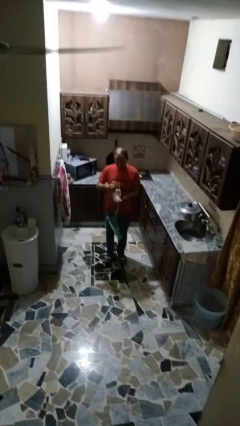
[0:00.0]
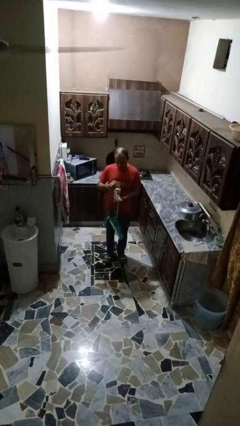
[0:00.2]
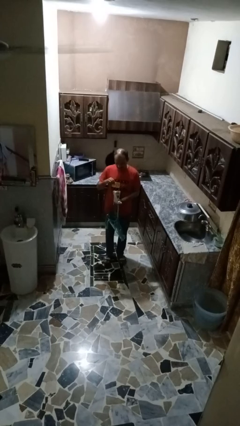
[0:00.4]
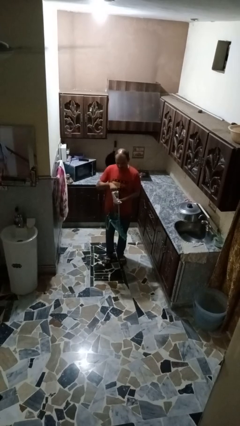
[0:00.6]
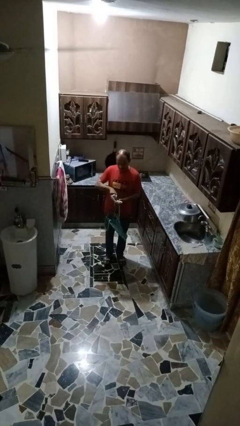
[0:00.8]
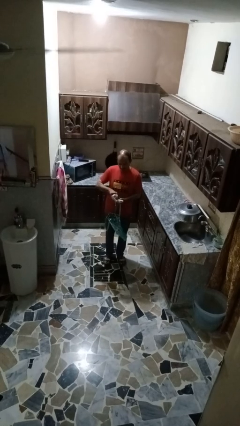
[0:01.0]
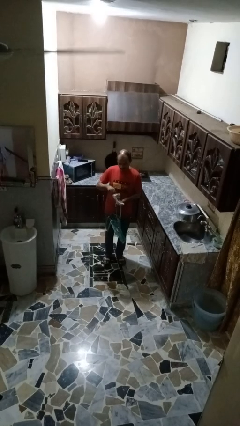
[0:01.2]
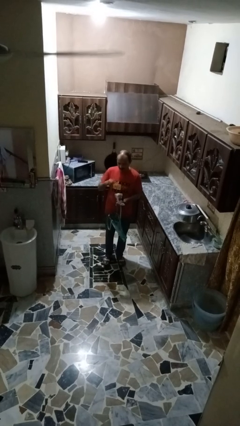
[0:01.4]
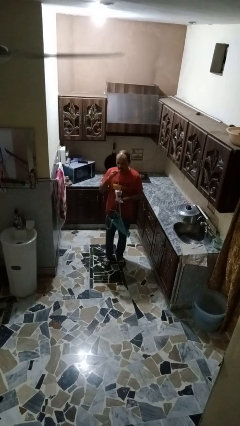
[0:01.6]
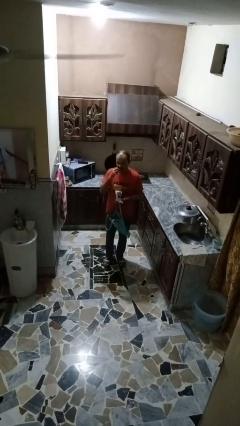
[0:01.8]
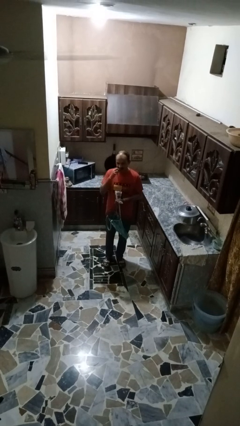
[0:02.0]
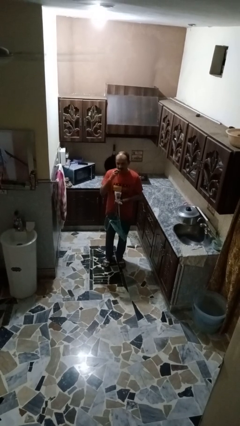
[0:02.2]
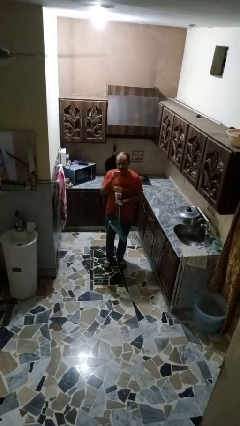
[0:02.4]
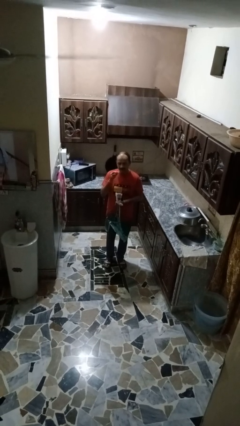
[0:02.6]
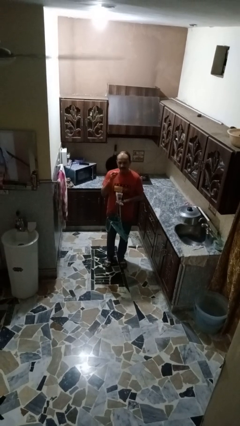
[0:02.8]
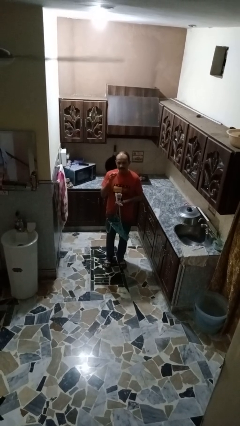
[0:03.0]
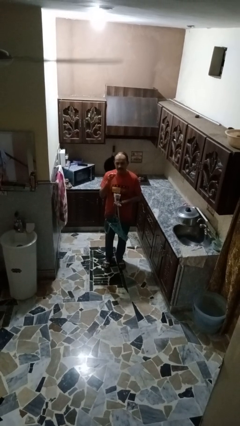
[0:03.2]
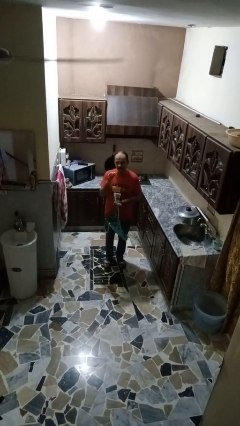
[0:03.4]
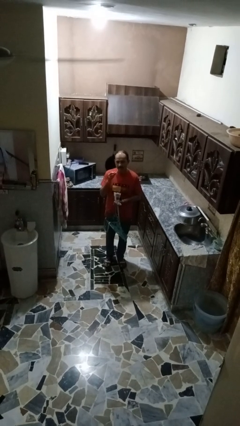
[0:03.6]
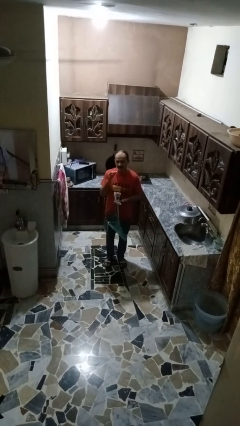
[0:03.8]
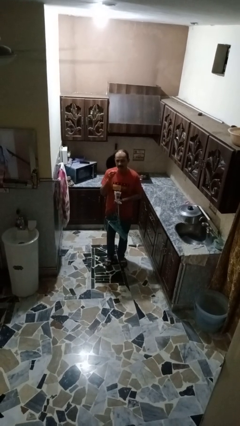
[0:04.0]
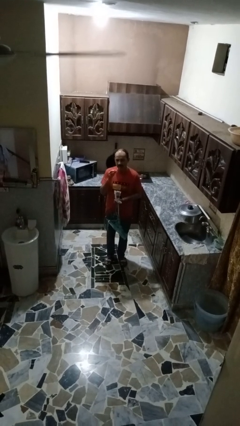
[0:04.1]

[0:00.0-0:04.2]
person eats snack from bag

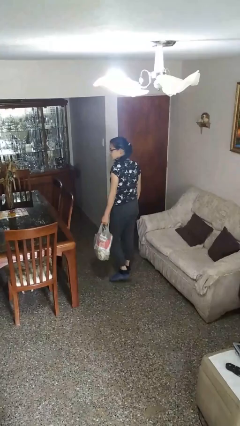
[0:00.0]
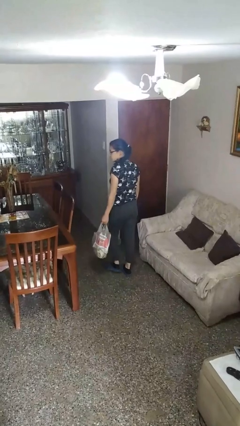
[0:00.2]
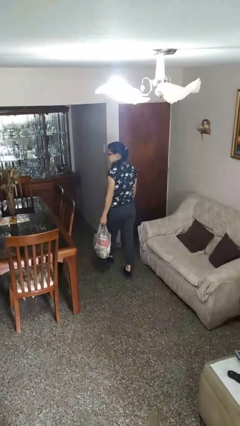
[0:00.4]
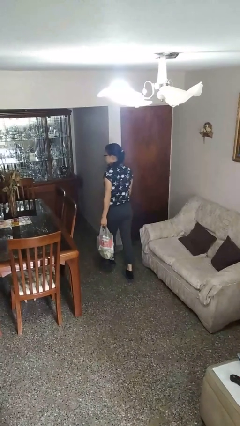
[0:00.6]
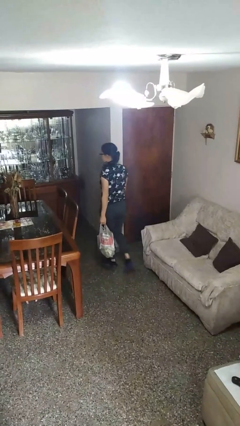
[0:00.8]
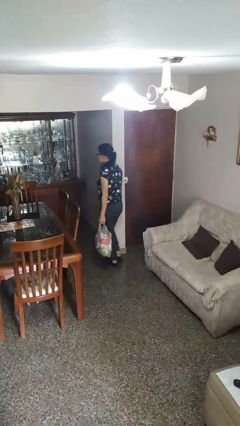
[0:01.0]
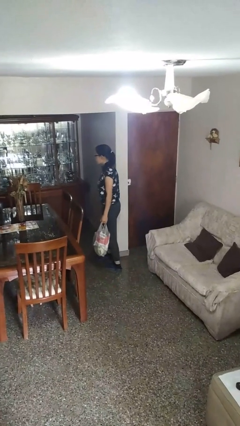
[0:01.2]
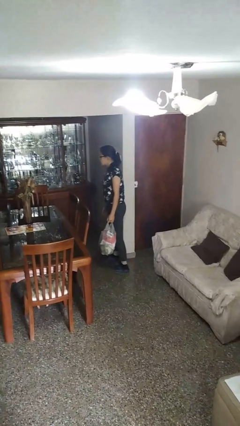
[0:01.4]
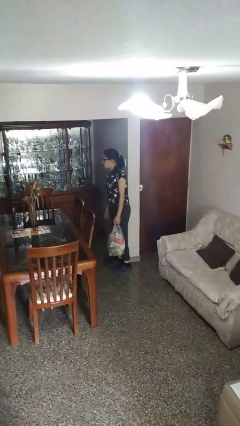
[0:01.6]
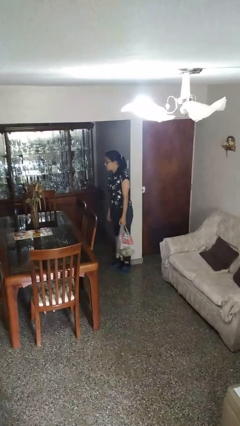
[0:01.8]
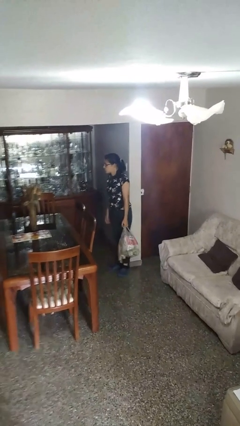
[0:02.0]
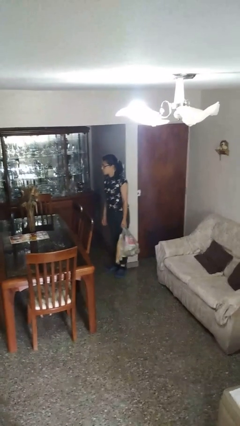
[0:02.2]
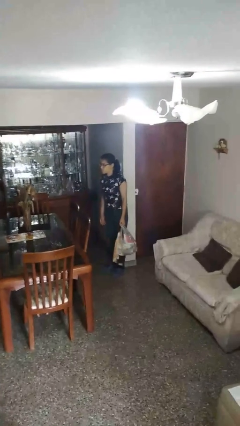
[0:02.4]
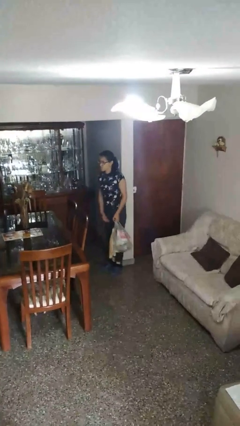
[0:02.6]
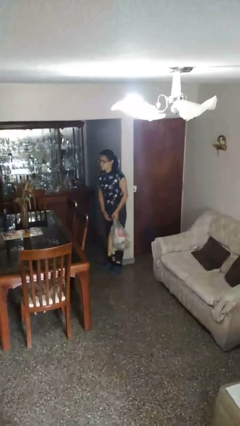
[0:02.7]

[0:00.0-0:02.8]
person carries groceries

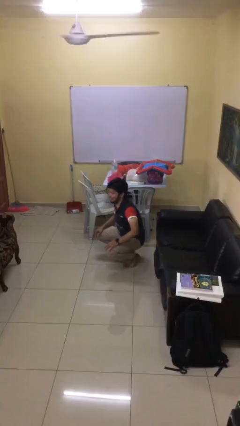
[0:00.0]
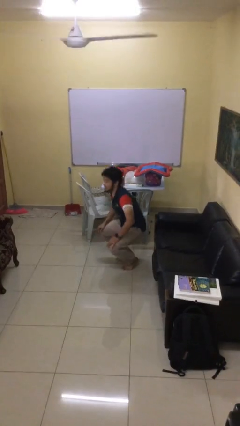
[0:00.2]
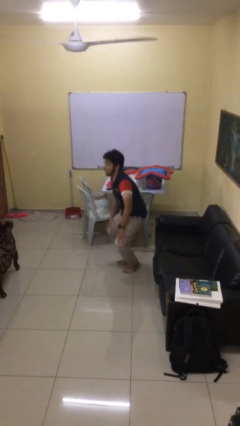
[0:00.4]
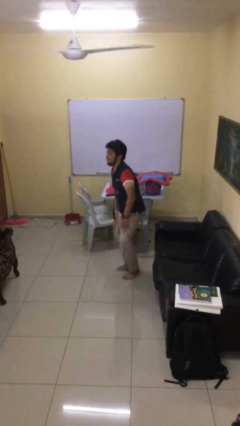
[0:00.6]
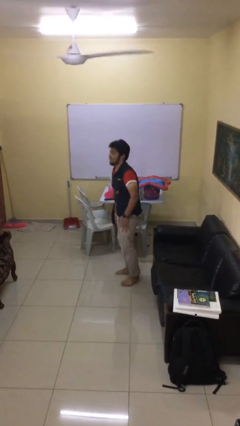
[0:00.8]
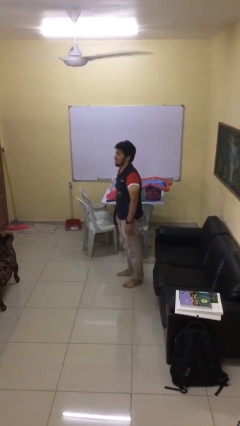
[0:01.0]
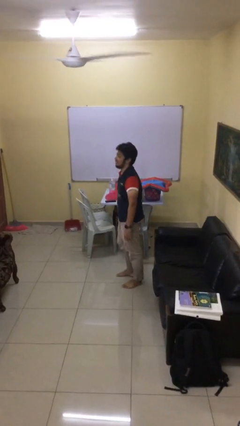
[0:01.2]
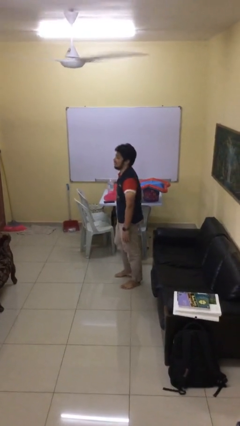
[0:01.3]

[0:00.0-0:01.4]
person stands up

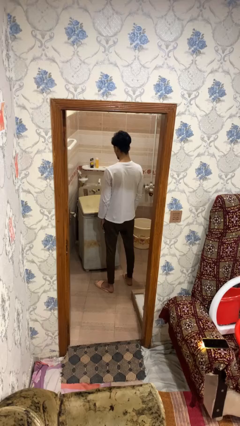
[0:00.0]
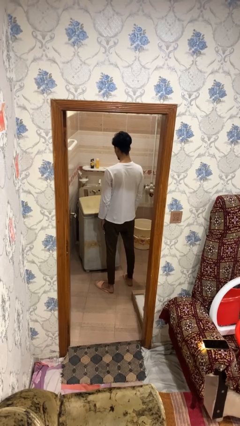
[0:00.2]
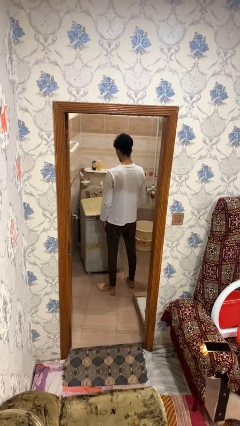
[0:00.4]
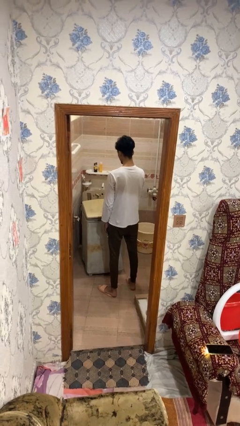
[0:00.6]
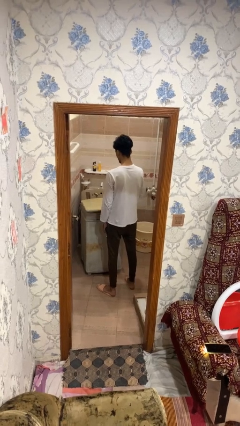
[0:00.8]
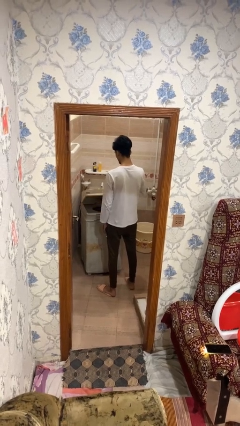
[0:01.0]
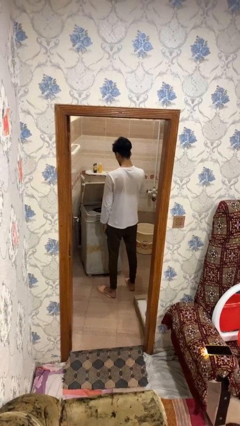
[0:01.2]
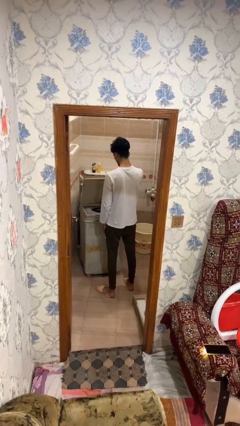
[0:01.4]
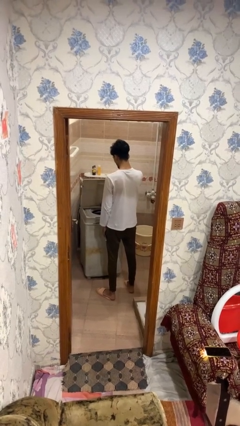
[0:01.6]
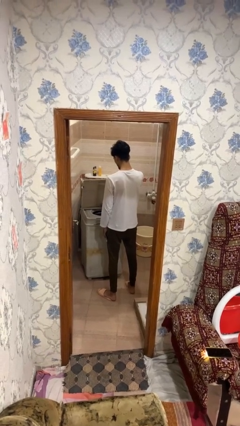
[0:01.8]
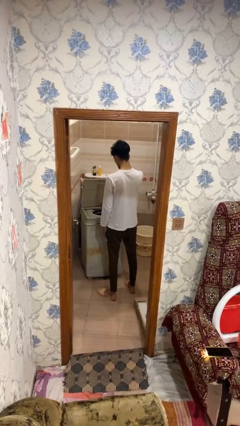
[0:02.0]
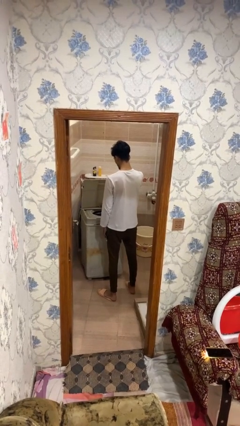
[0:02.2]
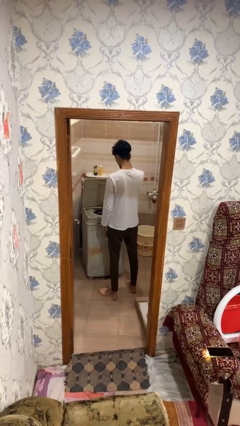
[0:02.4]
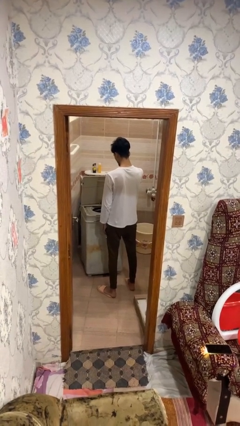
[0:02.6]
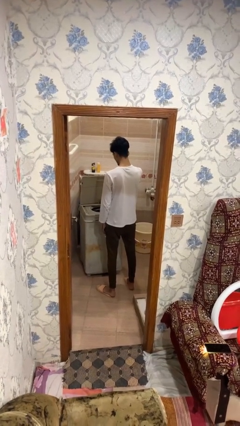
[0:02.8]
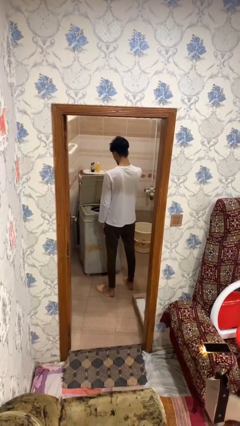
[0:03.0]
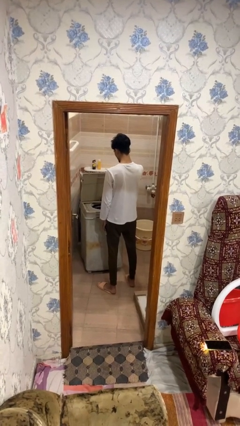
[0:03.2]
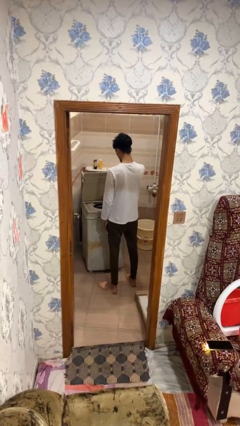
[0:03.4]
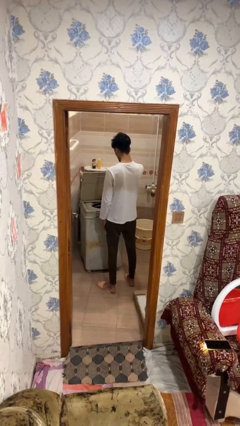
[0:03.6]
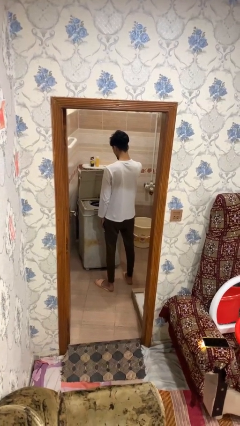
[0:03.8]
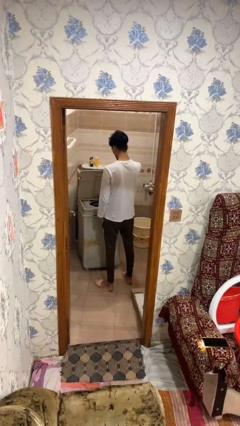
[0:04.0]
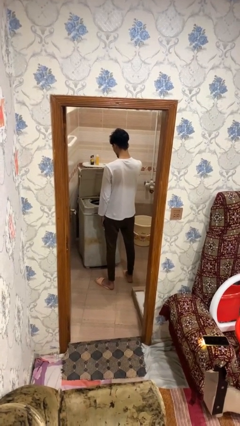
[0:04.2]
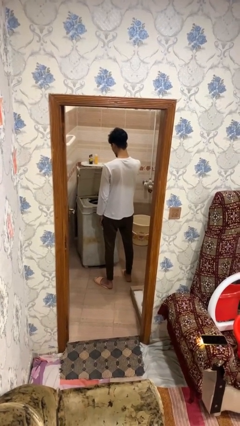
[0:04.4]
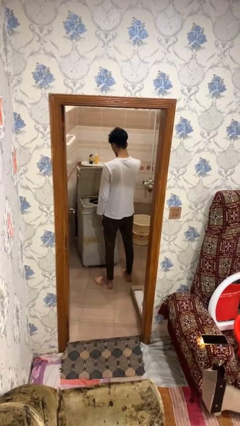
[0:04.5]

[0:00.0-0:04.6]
person opens clothes washer

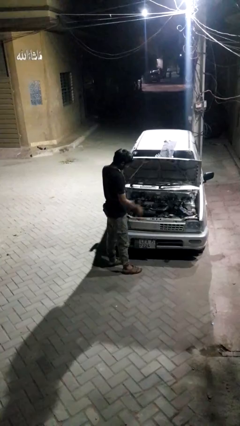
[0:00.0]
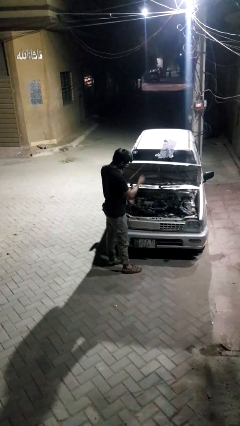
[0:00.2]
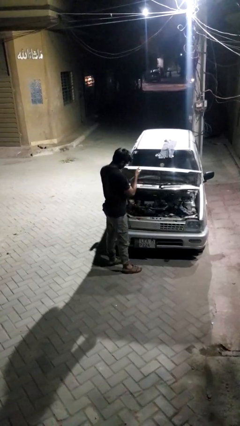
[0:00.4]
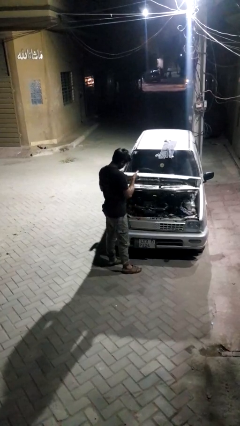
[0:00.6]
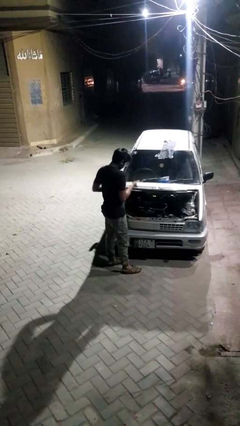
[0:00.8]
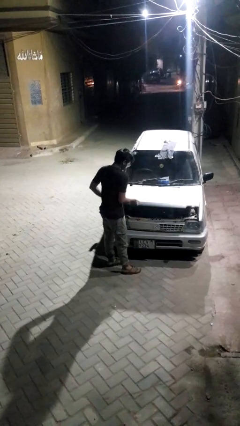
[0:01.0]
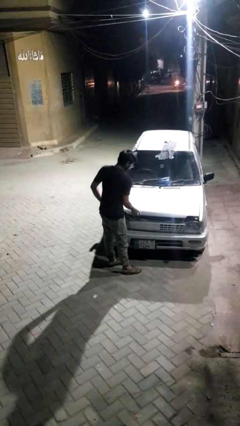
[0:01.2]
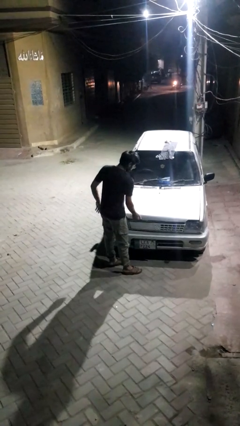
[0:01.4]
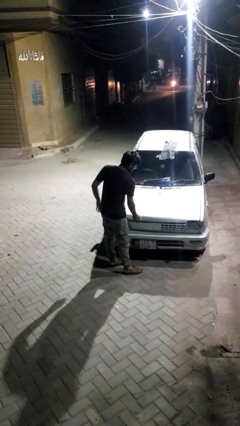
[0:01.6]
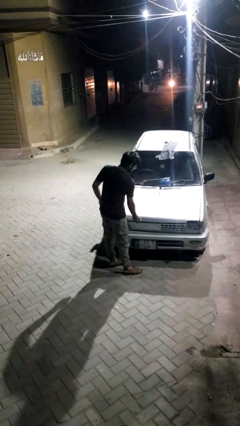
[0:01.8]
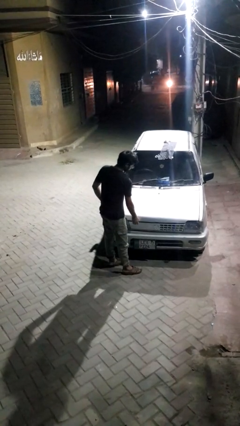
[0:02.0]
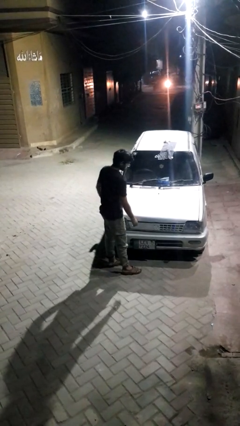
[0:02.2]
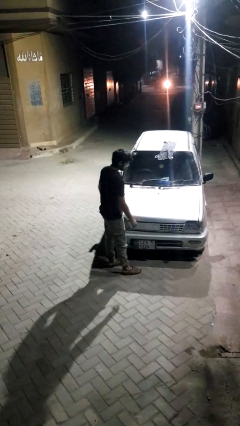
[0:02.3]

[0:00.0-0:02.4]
person closes car hood

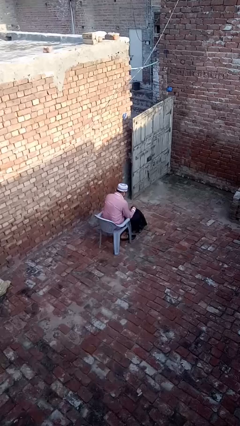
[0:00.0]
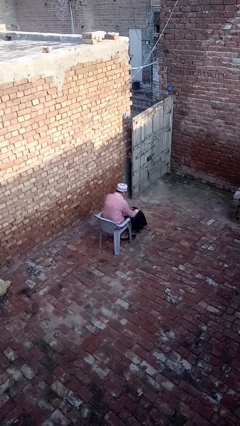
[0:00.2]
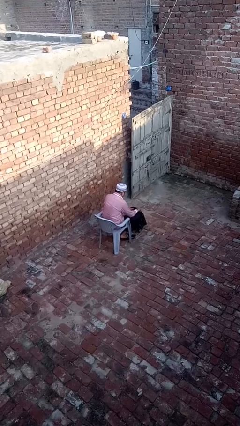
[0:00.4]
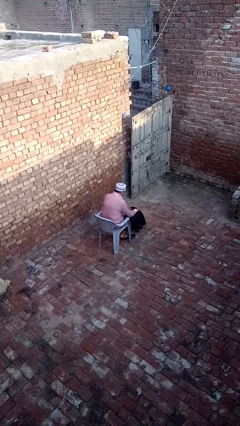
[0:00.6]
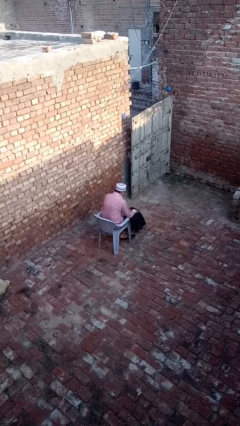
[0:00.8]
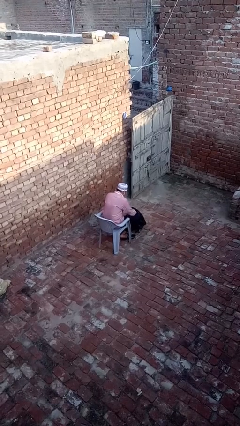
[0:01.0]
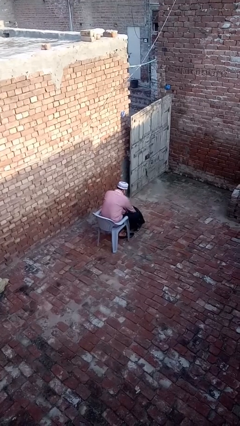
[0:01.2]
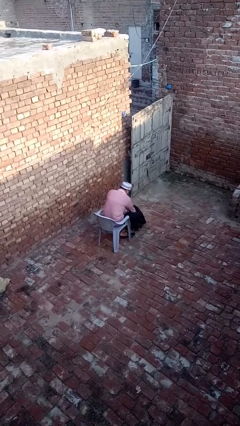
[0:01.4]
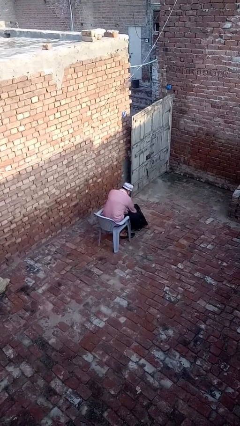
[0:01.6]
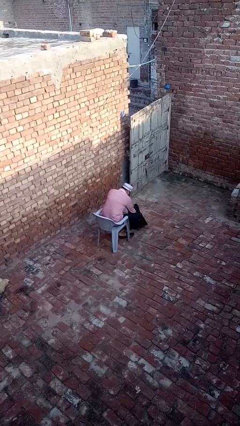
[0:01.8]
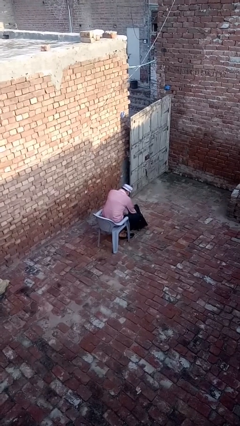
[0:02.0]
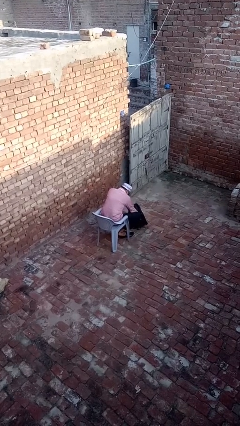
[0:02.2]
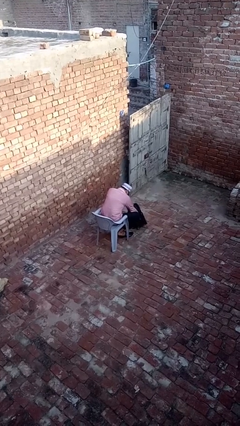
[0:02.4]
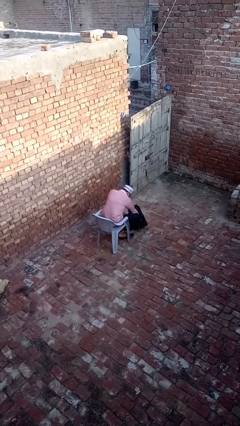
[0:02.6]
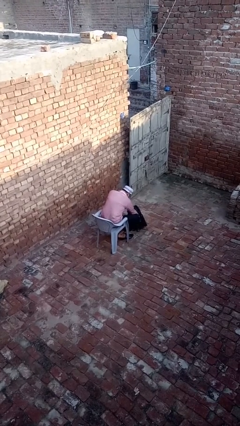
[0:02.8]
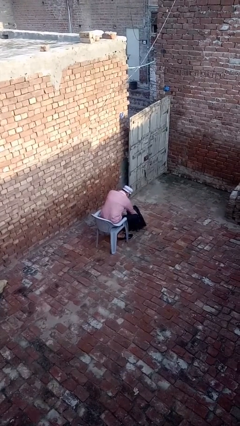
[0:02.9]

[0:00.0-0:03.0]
person searches in backpack
